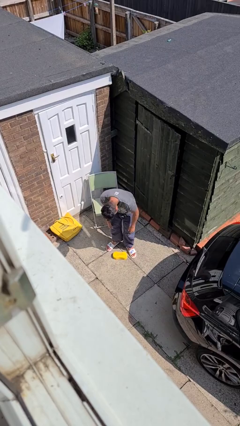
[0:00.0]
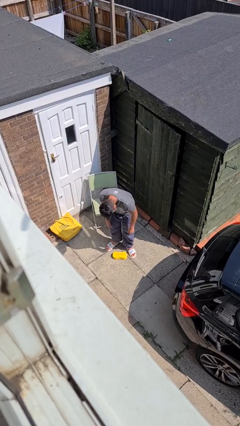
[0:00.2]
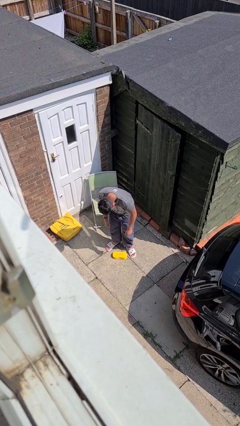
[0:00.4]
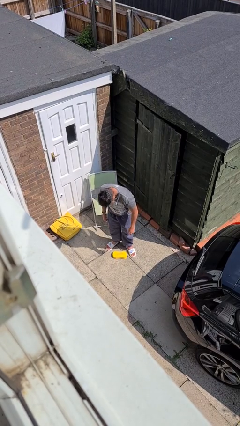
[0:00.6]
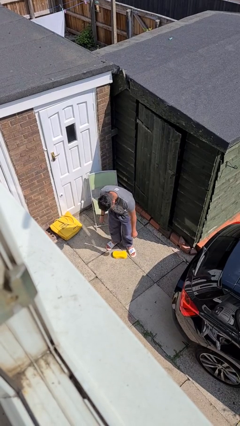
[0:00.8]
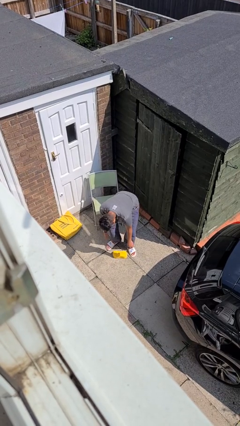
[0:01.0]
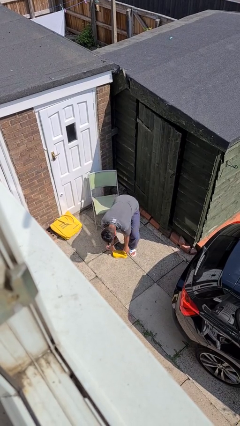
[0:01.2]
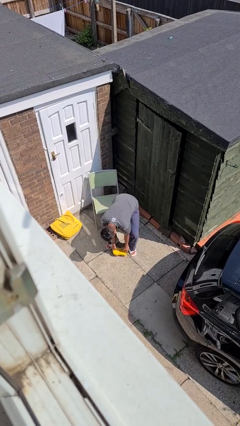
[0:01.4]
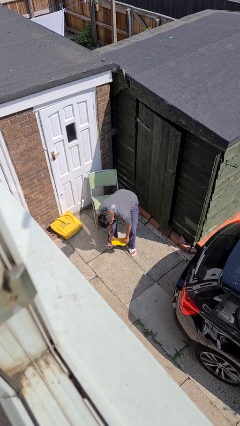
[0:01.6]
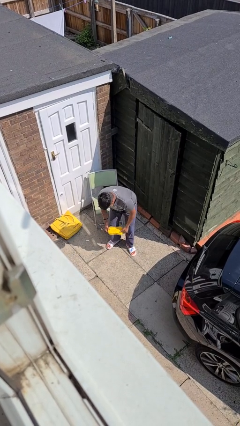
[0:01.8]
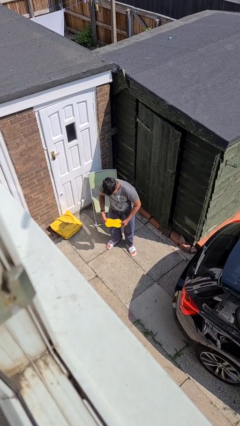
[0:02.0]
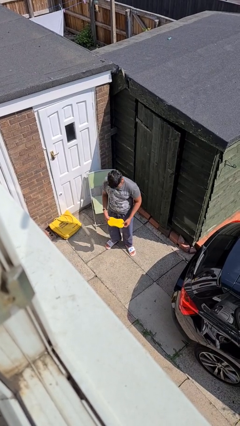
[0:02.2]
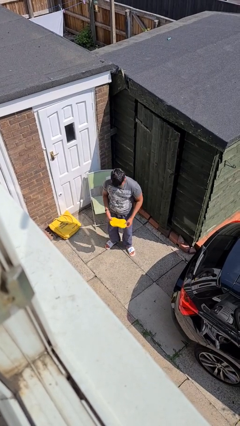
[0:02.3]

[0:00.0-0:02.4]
person picks up object from floor

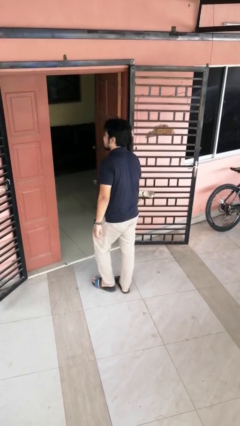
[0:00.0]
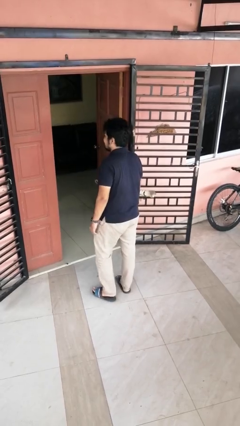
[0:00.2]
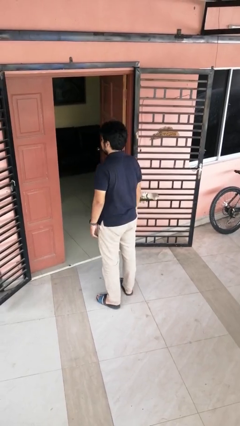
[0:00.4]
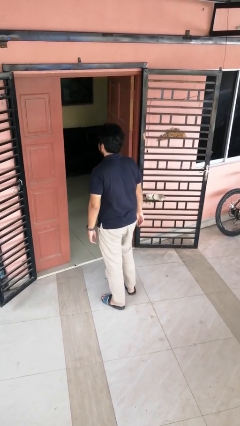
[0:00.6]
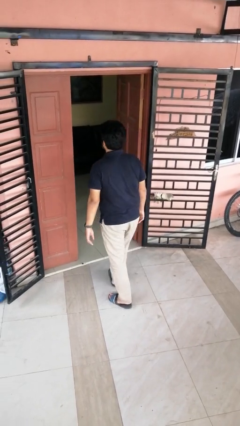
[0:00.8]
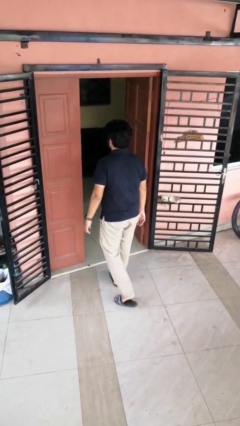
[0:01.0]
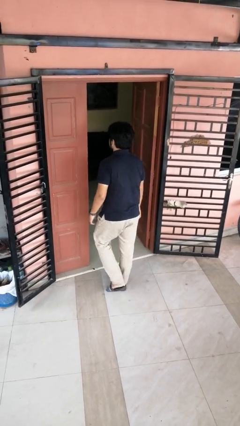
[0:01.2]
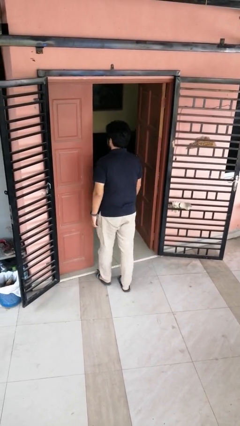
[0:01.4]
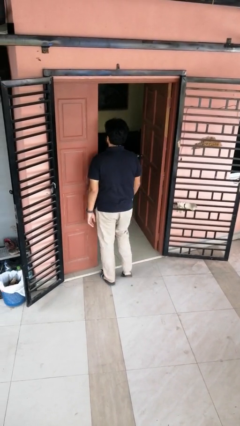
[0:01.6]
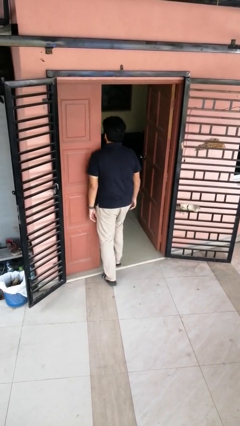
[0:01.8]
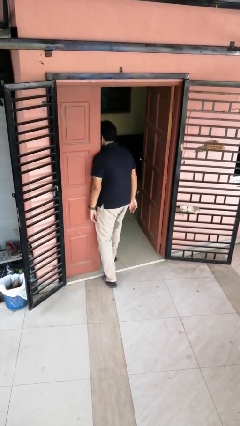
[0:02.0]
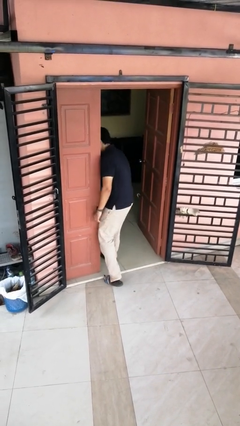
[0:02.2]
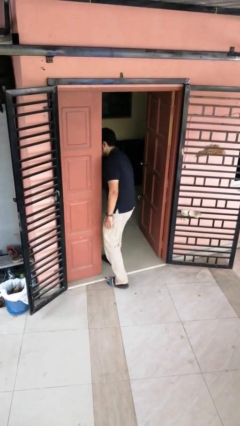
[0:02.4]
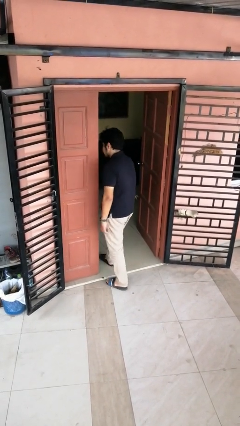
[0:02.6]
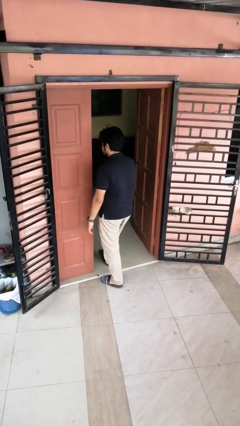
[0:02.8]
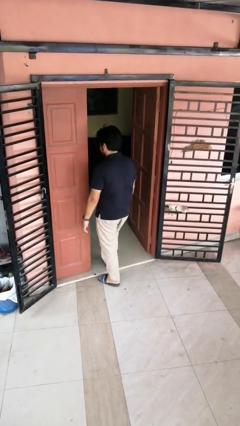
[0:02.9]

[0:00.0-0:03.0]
person bumps into wall

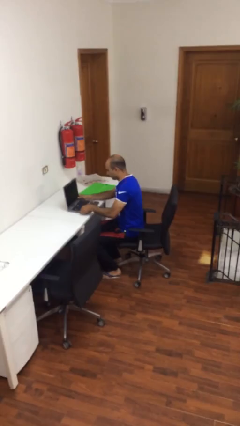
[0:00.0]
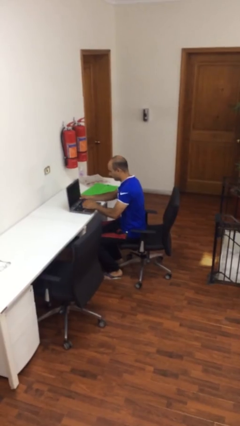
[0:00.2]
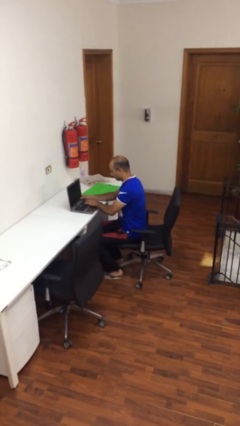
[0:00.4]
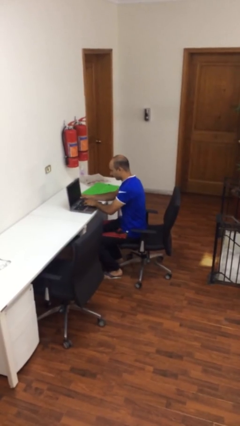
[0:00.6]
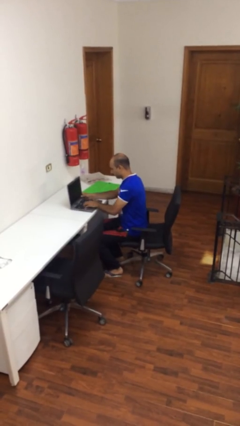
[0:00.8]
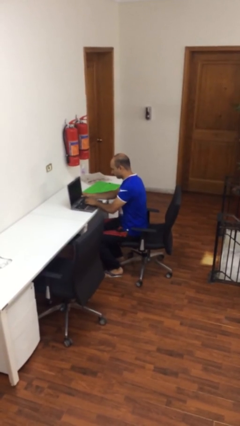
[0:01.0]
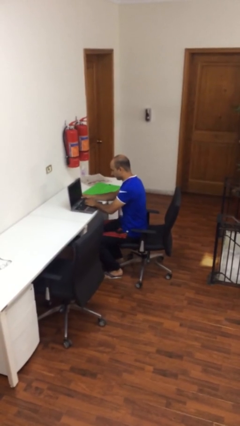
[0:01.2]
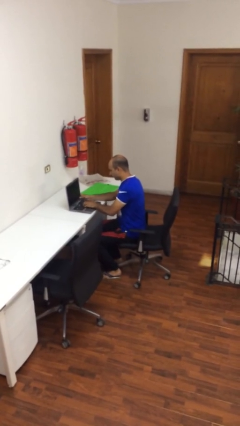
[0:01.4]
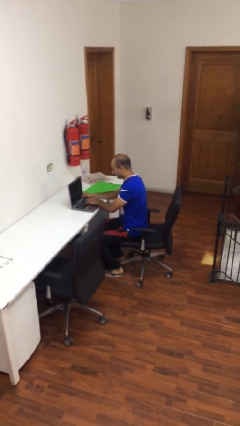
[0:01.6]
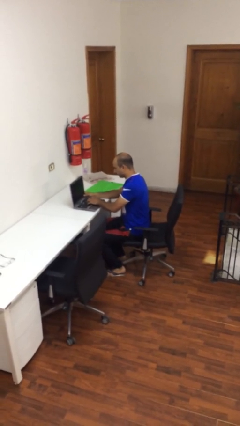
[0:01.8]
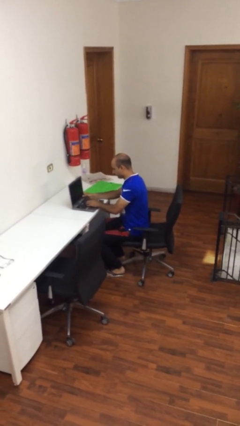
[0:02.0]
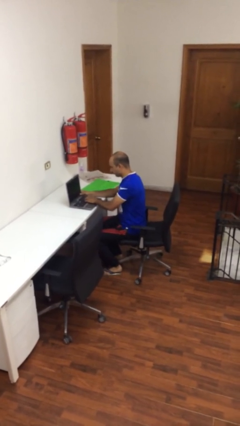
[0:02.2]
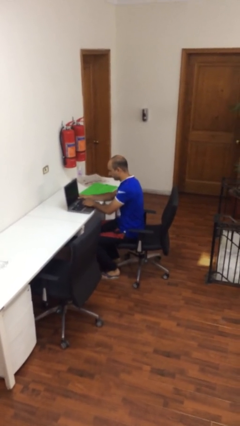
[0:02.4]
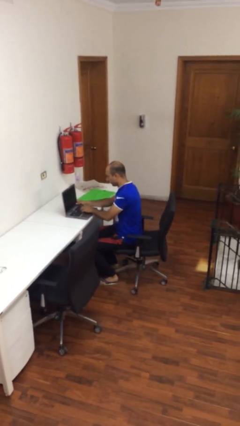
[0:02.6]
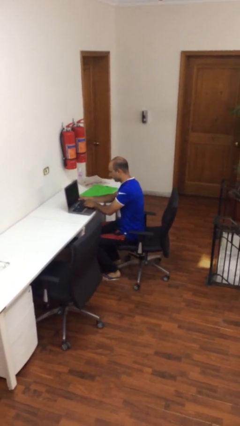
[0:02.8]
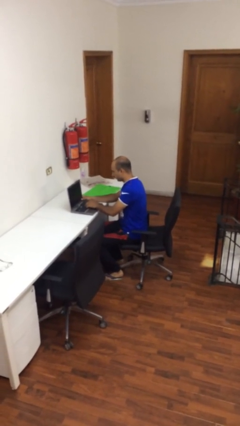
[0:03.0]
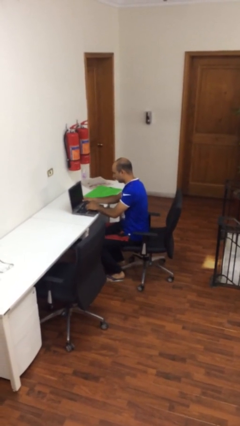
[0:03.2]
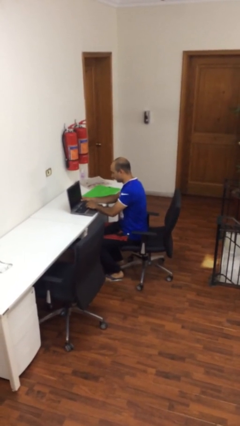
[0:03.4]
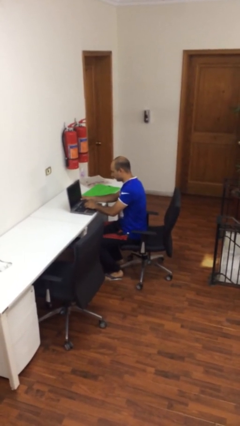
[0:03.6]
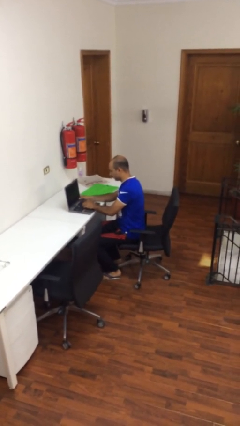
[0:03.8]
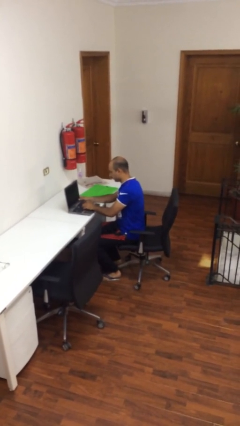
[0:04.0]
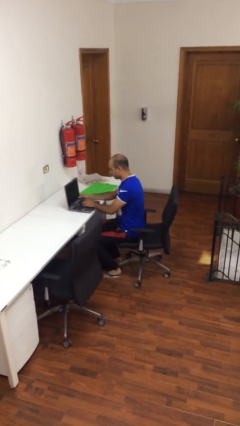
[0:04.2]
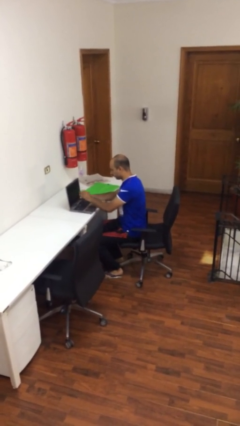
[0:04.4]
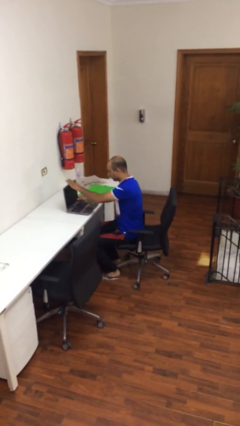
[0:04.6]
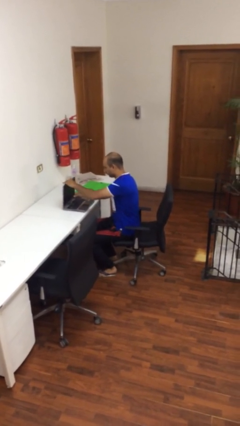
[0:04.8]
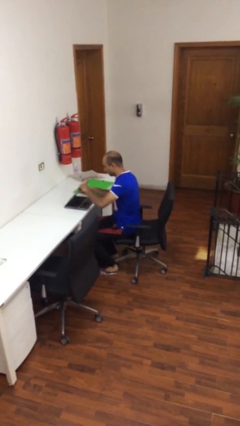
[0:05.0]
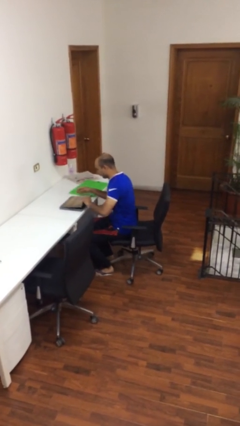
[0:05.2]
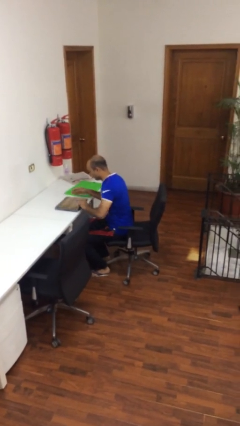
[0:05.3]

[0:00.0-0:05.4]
person interacts with laptop

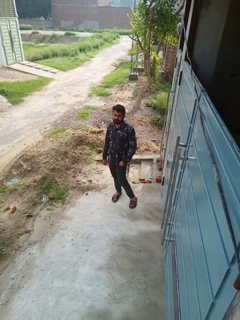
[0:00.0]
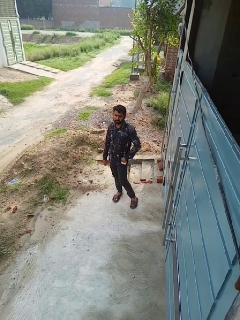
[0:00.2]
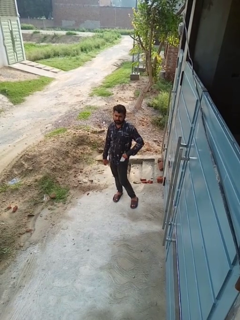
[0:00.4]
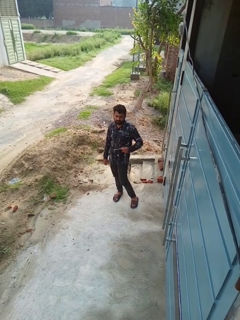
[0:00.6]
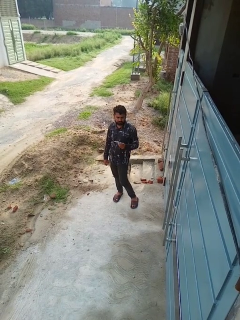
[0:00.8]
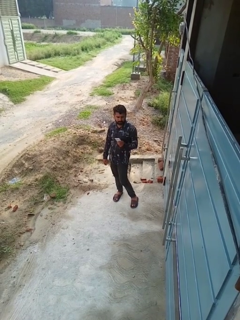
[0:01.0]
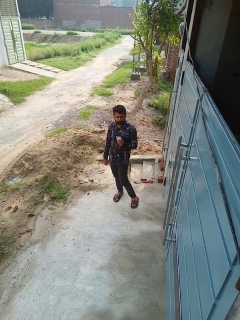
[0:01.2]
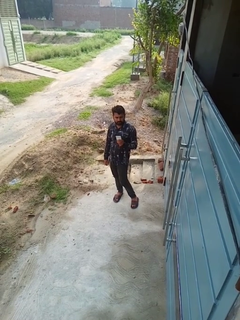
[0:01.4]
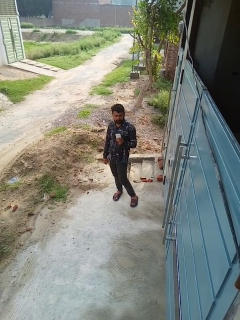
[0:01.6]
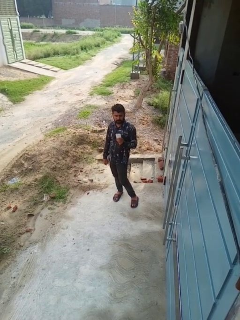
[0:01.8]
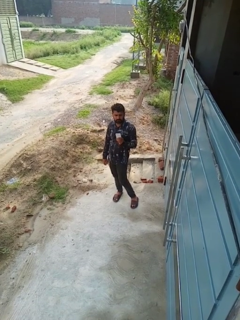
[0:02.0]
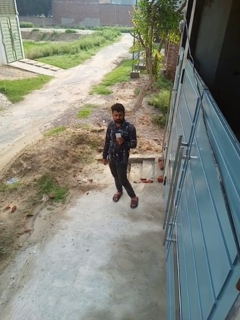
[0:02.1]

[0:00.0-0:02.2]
person takes phone from pocket

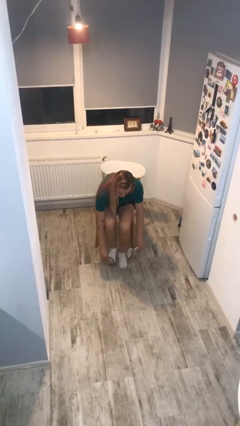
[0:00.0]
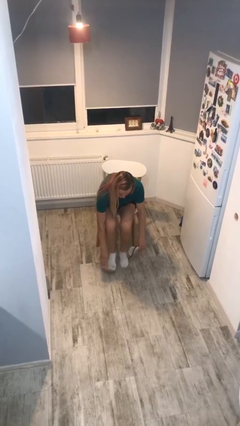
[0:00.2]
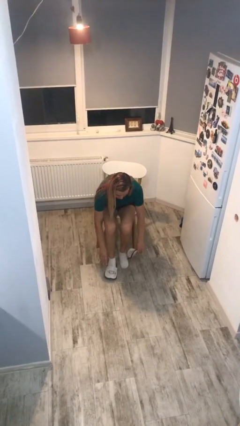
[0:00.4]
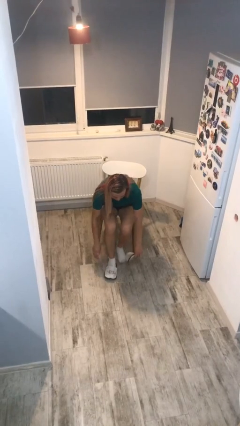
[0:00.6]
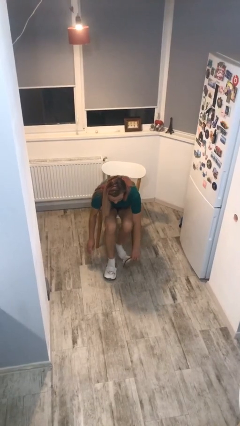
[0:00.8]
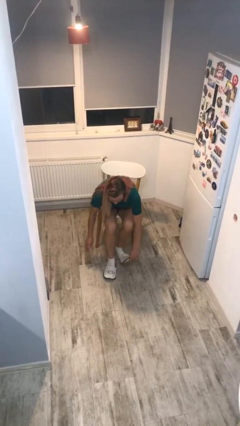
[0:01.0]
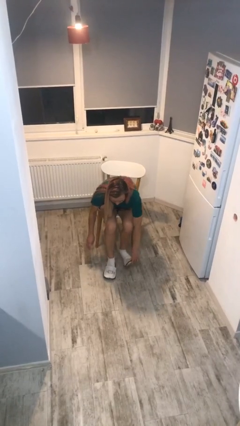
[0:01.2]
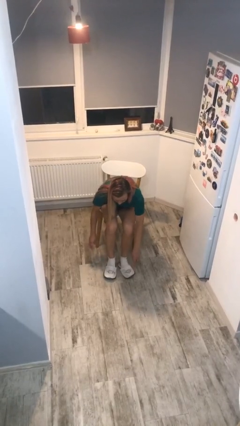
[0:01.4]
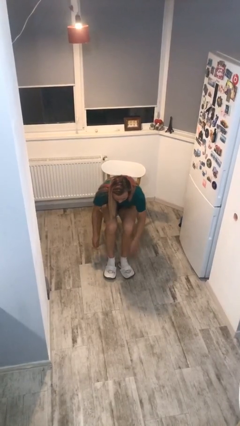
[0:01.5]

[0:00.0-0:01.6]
person puts on shoes

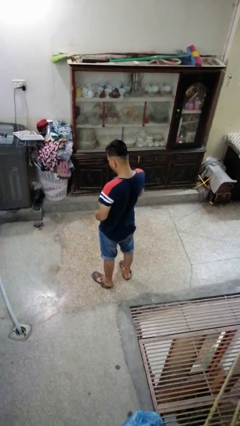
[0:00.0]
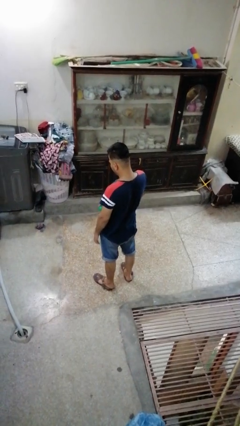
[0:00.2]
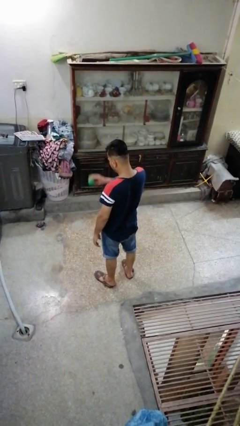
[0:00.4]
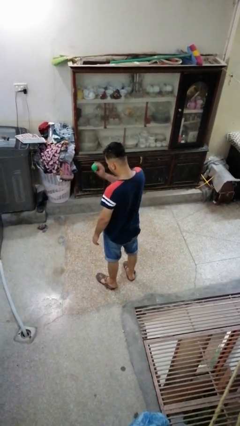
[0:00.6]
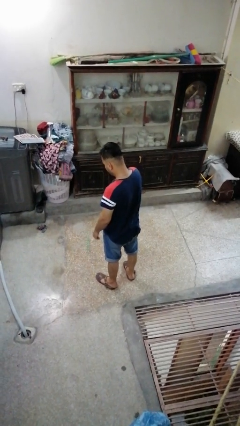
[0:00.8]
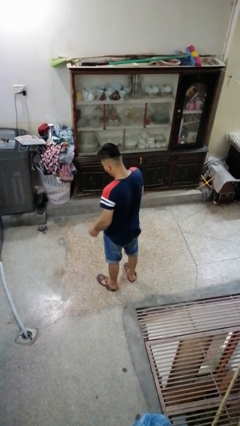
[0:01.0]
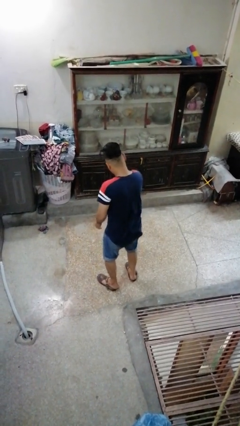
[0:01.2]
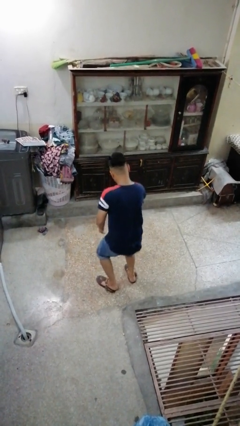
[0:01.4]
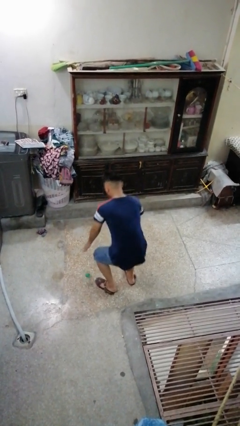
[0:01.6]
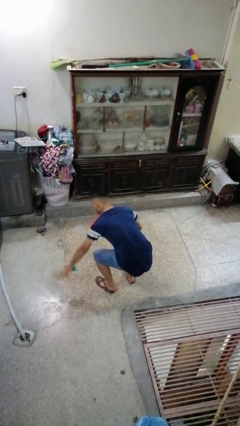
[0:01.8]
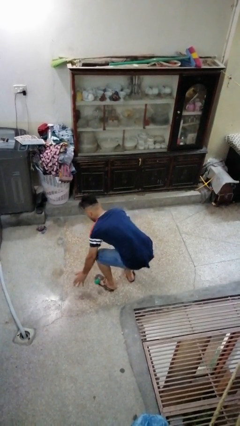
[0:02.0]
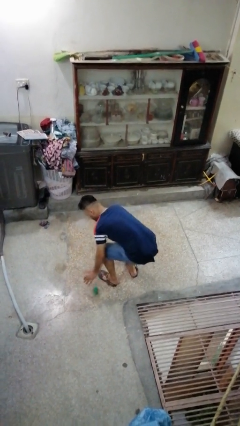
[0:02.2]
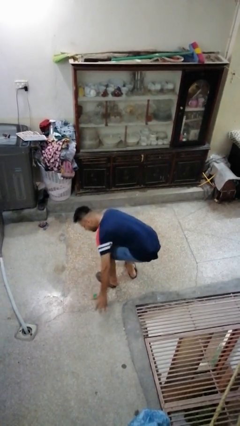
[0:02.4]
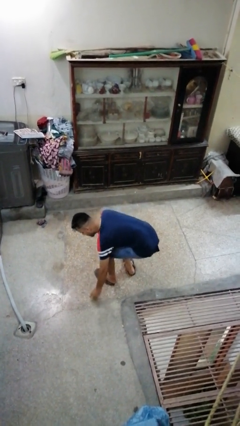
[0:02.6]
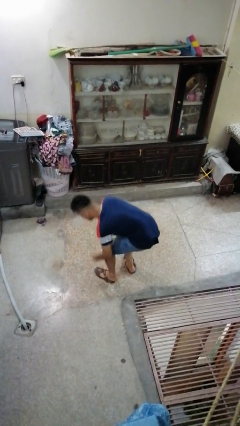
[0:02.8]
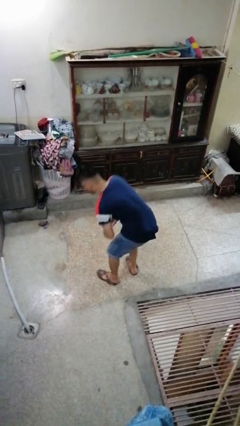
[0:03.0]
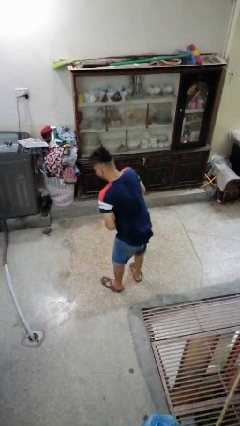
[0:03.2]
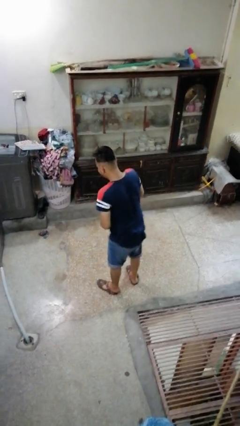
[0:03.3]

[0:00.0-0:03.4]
person bounces ball on floor
